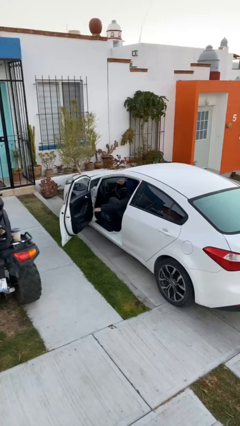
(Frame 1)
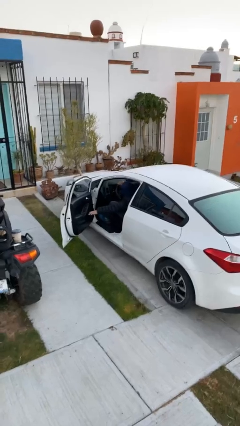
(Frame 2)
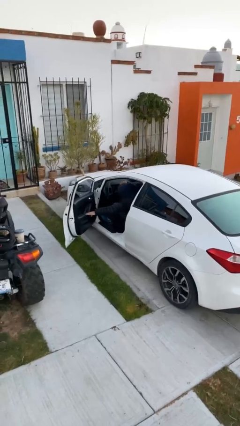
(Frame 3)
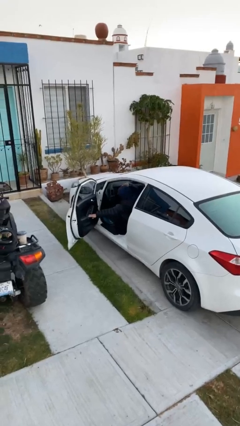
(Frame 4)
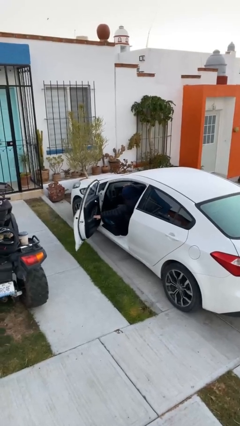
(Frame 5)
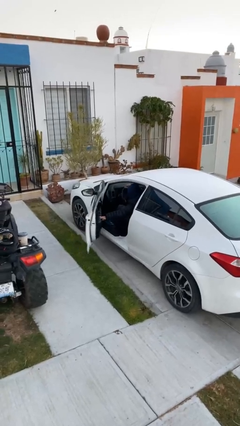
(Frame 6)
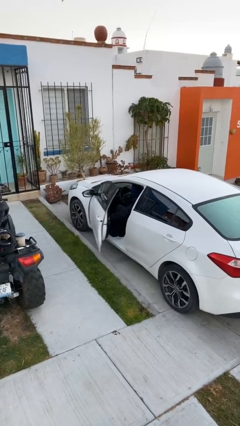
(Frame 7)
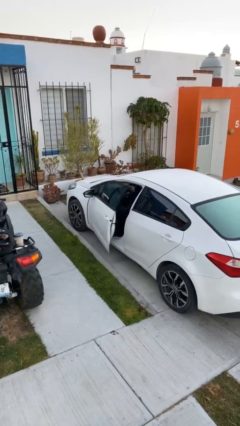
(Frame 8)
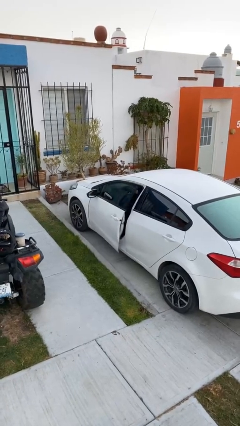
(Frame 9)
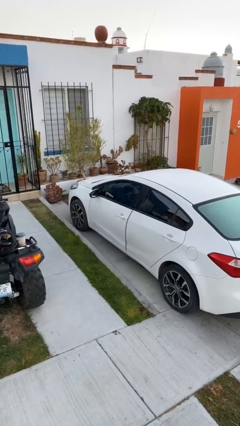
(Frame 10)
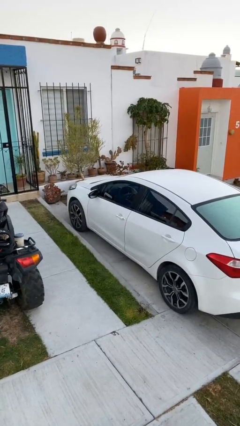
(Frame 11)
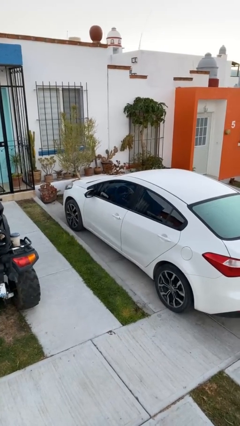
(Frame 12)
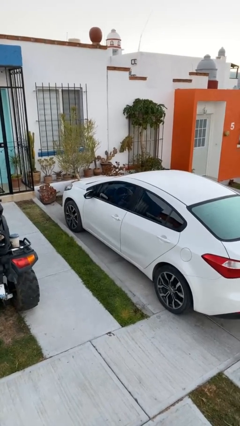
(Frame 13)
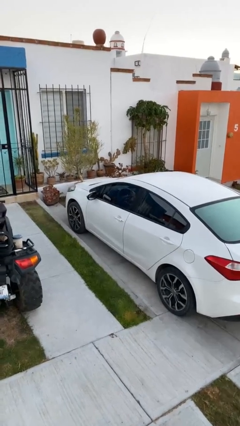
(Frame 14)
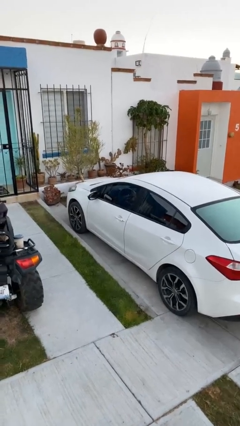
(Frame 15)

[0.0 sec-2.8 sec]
person closes car door

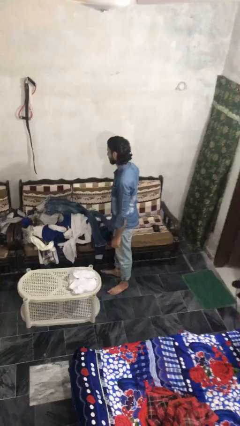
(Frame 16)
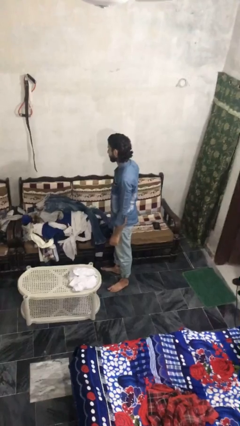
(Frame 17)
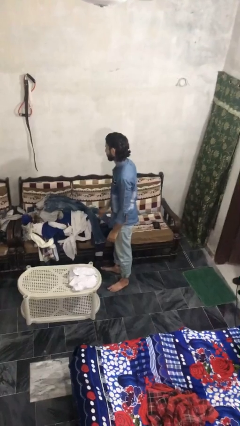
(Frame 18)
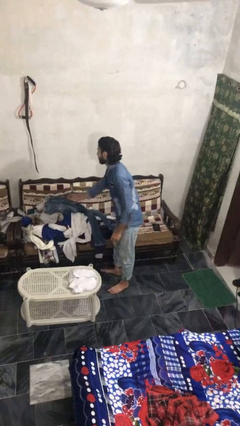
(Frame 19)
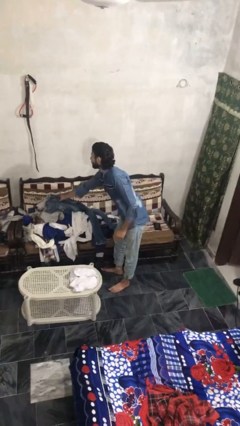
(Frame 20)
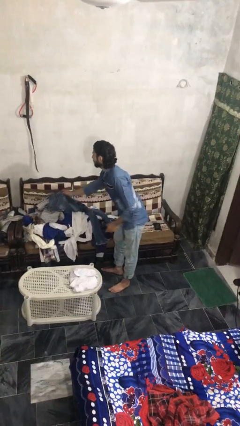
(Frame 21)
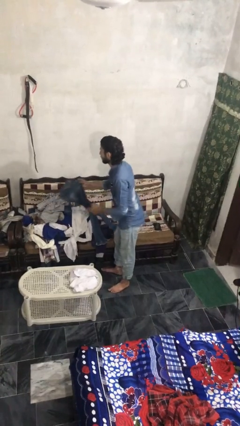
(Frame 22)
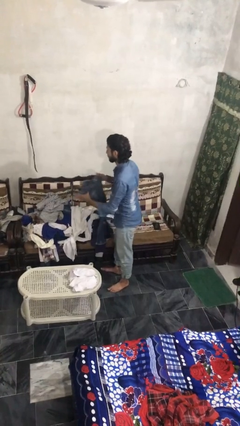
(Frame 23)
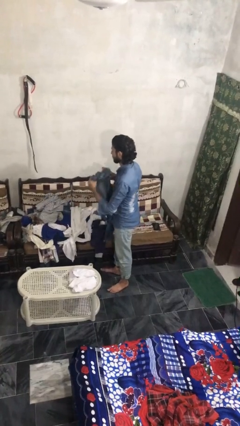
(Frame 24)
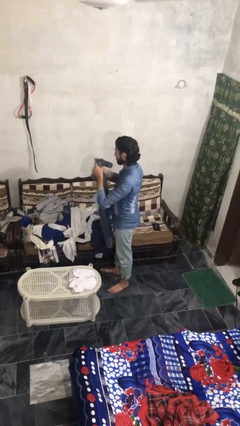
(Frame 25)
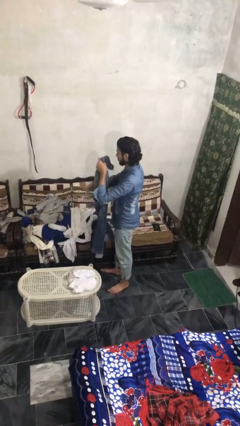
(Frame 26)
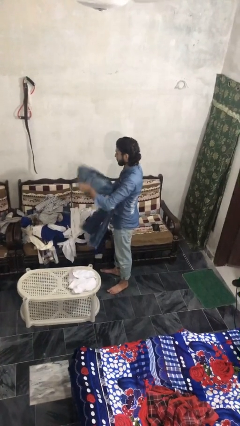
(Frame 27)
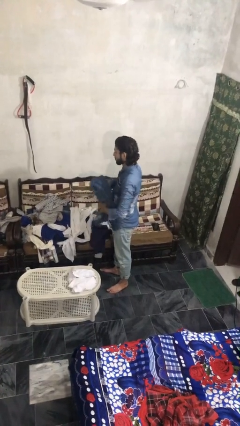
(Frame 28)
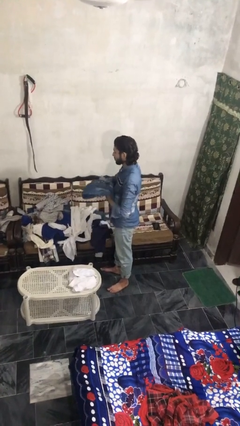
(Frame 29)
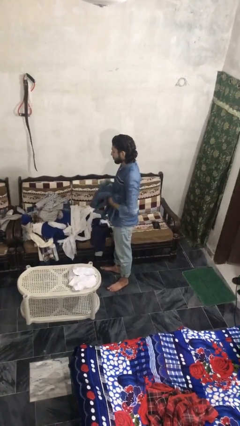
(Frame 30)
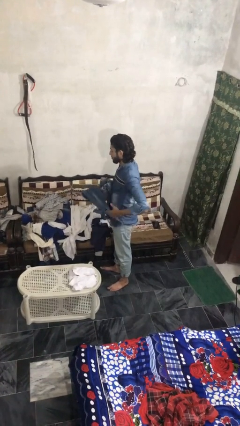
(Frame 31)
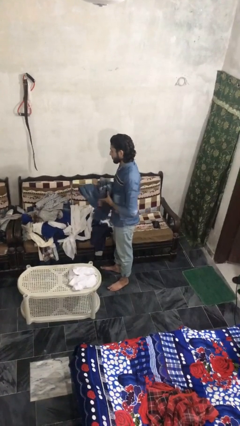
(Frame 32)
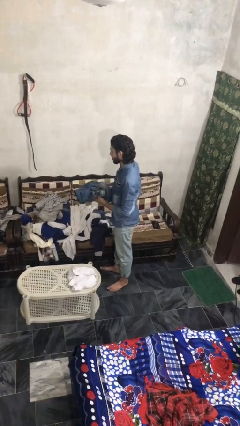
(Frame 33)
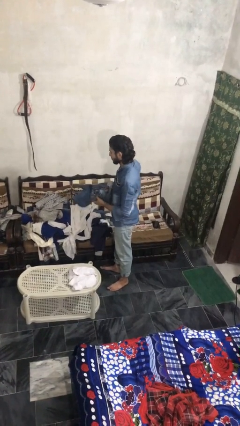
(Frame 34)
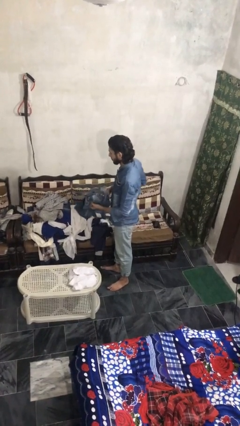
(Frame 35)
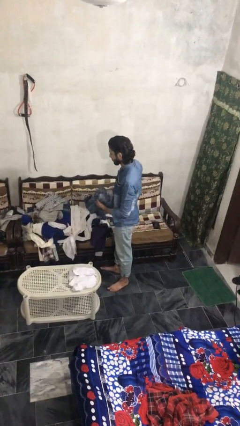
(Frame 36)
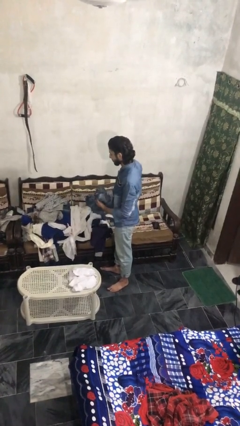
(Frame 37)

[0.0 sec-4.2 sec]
person folds pants

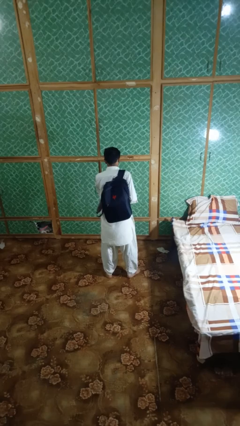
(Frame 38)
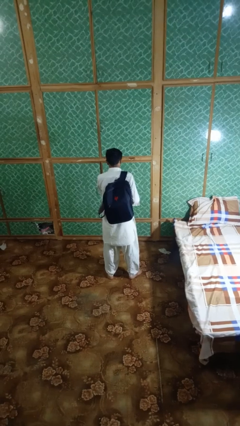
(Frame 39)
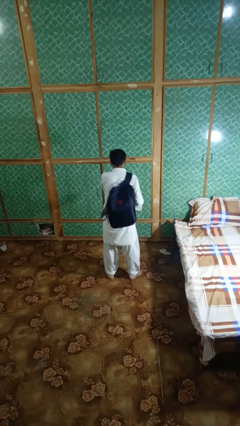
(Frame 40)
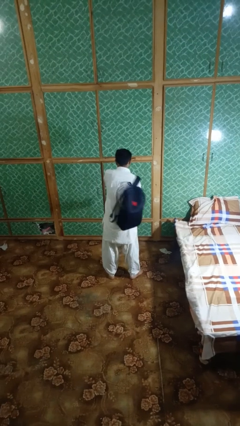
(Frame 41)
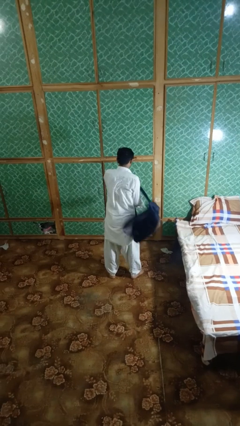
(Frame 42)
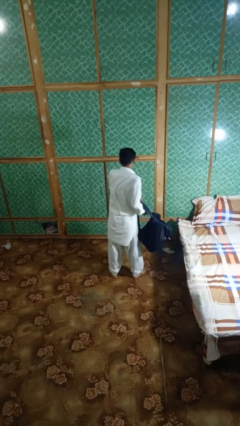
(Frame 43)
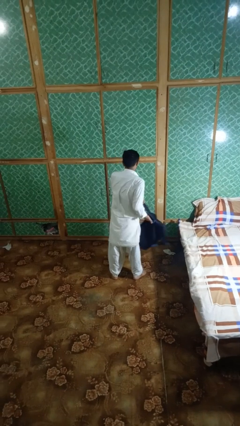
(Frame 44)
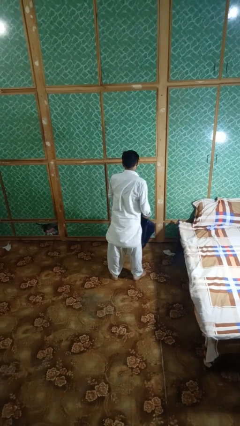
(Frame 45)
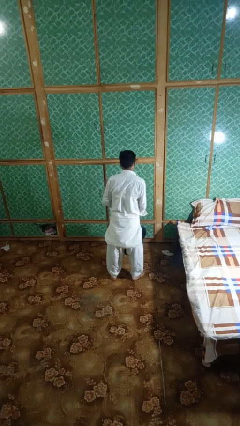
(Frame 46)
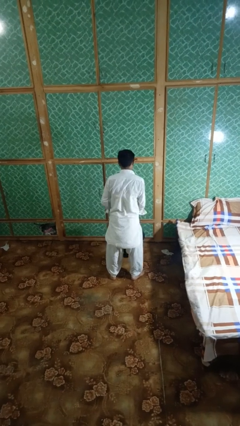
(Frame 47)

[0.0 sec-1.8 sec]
person takes off backpack

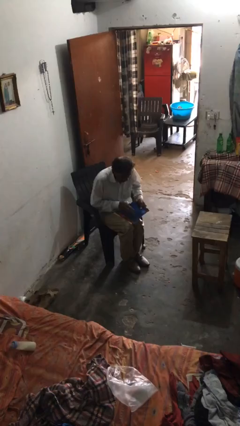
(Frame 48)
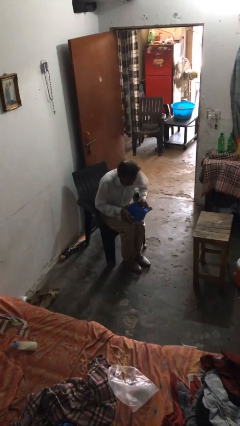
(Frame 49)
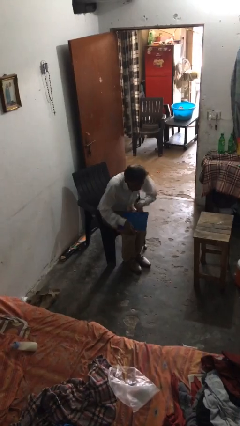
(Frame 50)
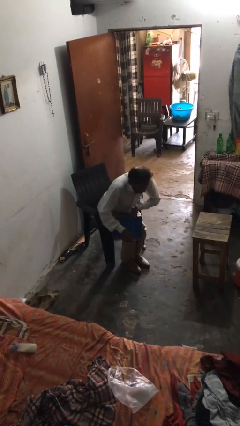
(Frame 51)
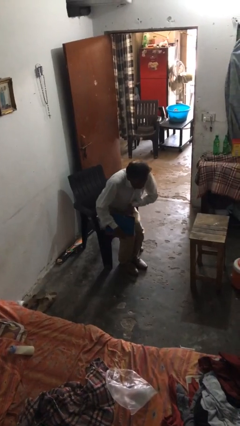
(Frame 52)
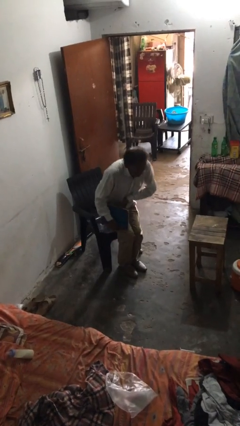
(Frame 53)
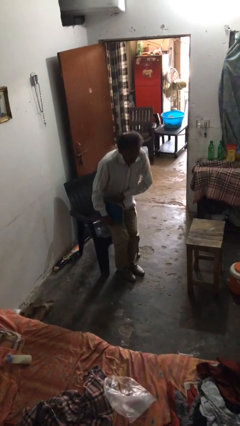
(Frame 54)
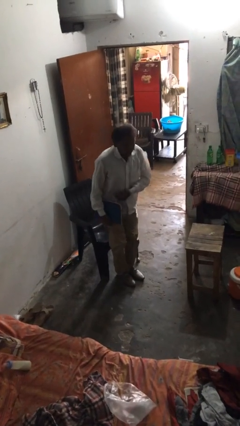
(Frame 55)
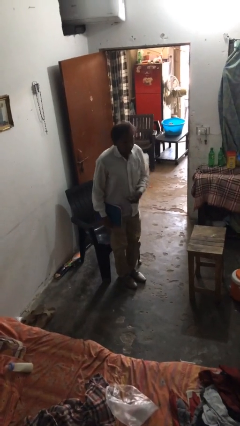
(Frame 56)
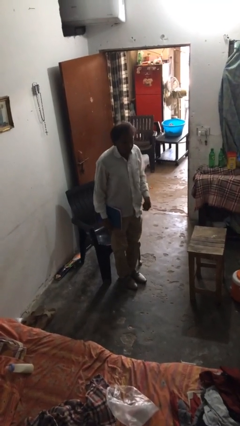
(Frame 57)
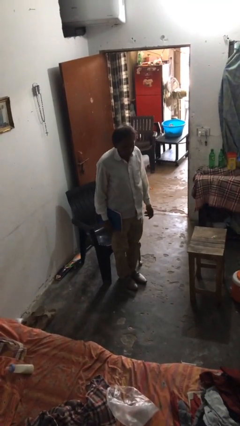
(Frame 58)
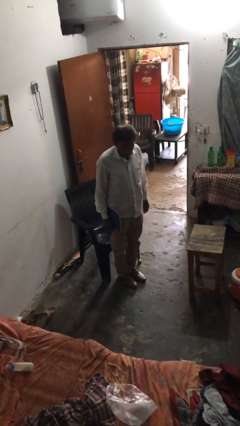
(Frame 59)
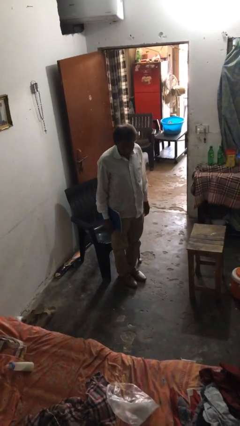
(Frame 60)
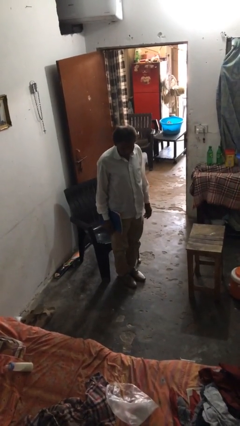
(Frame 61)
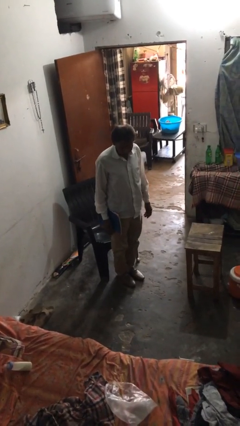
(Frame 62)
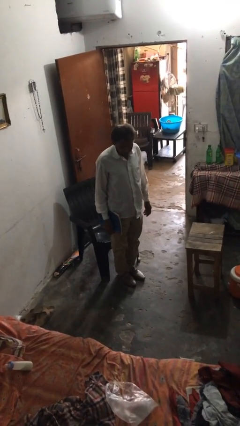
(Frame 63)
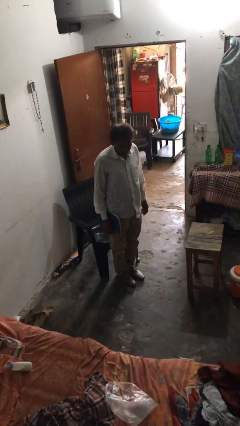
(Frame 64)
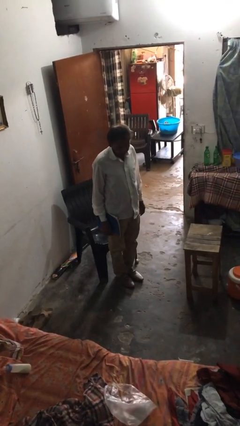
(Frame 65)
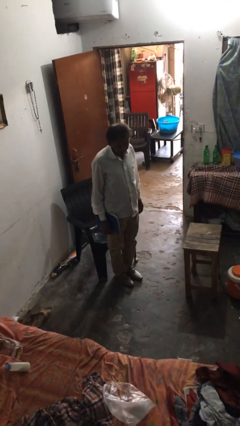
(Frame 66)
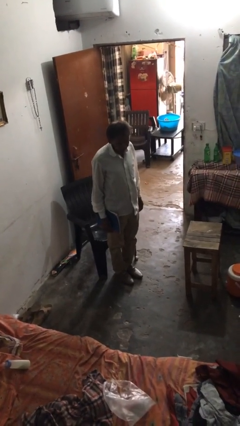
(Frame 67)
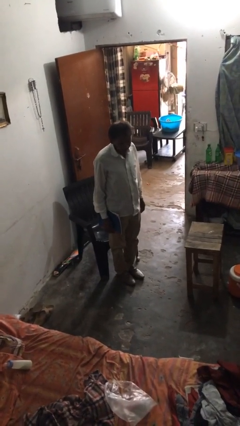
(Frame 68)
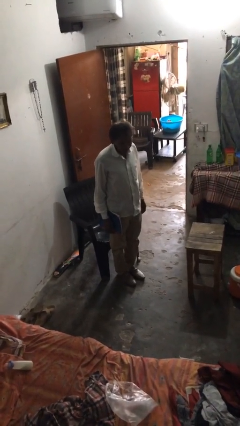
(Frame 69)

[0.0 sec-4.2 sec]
person stands up

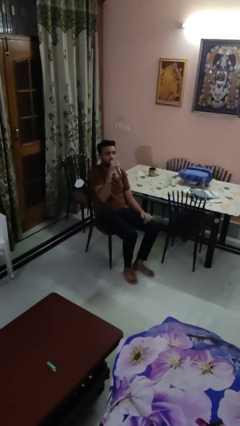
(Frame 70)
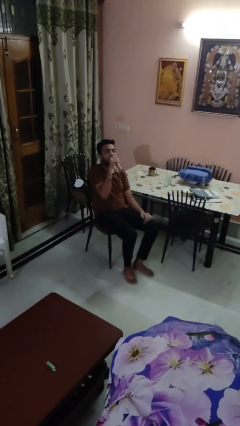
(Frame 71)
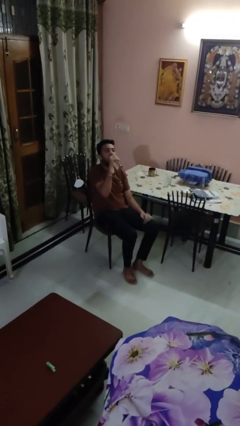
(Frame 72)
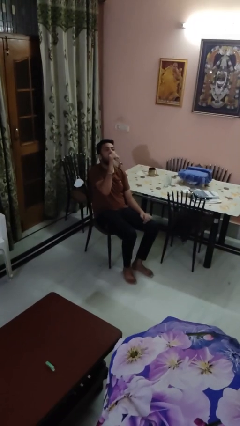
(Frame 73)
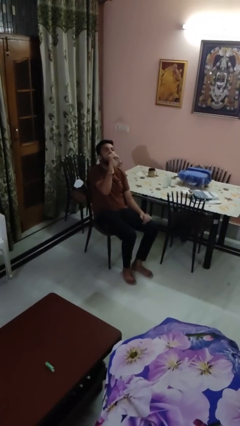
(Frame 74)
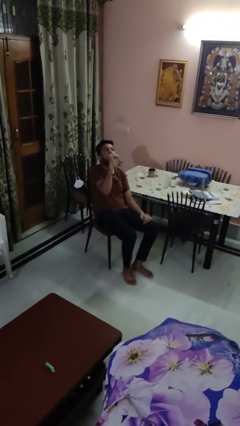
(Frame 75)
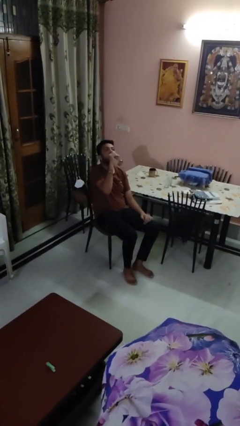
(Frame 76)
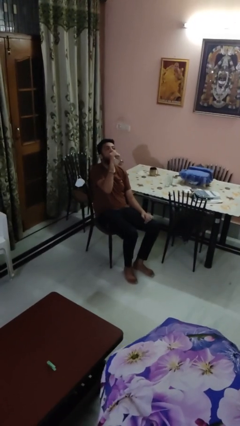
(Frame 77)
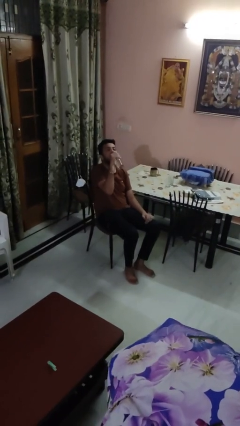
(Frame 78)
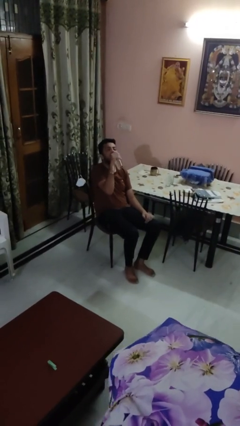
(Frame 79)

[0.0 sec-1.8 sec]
person drinks from bottle

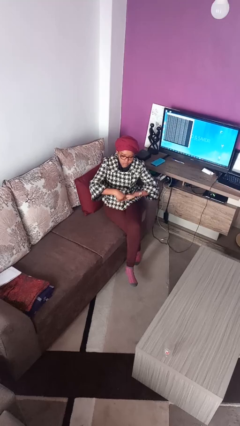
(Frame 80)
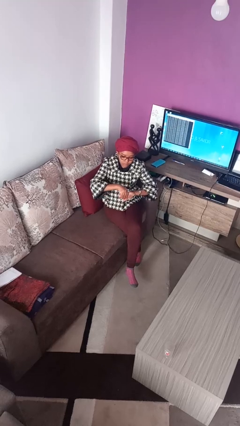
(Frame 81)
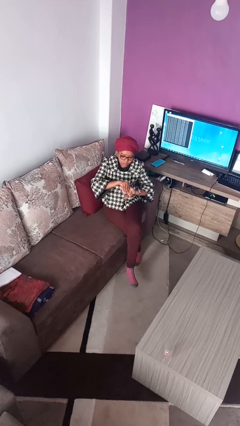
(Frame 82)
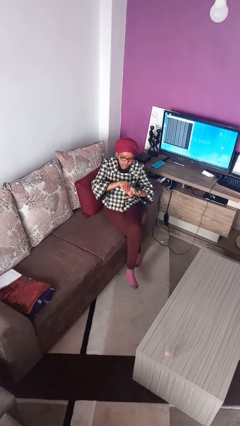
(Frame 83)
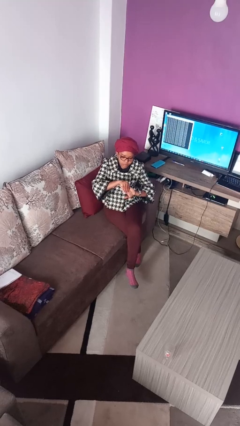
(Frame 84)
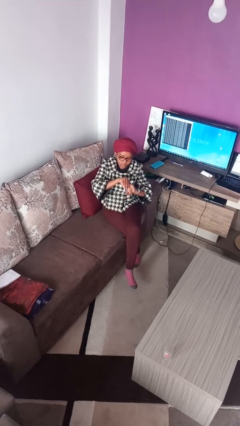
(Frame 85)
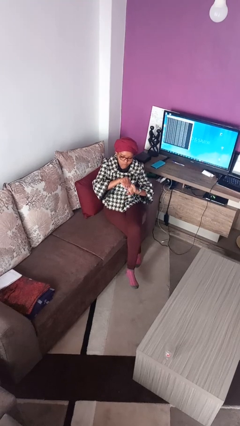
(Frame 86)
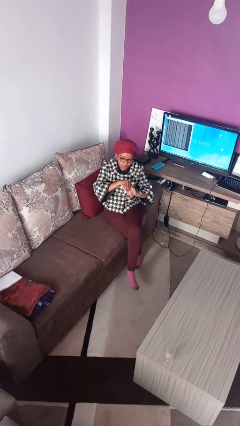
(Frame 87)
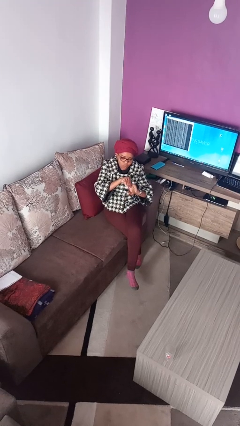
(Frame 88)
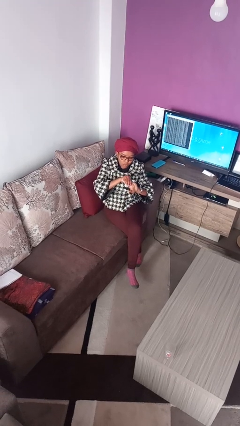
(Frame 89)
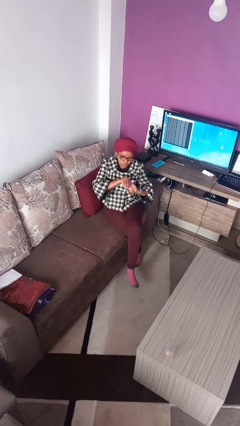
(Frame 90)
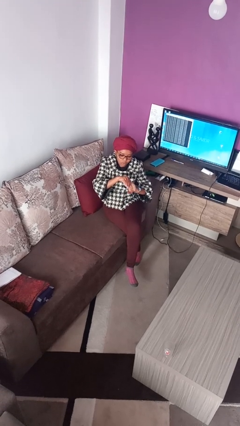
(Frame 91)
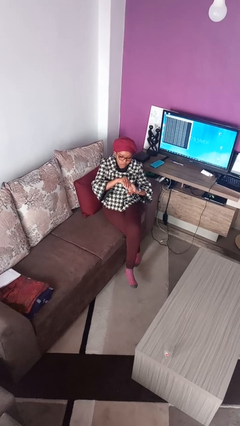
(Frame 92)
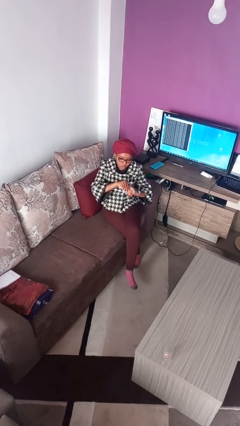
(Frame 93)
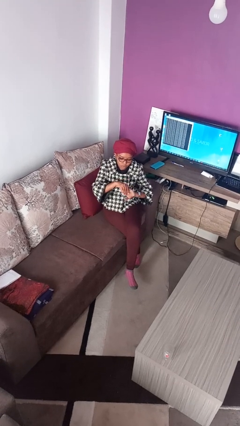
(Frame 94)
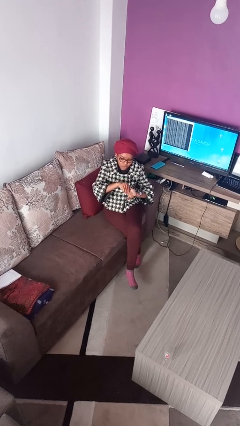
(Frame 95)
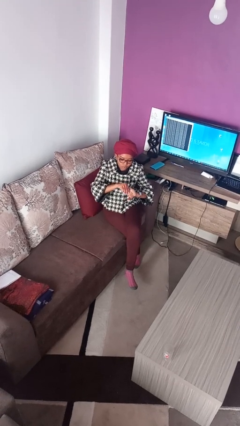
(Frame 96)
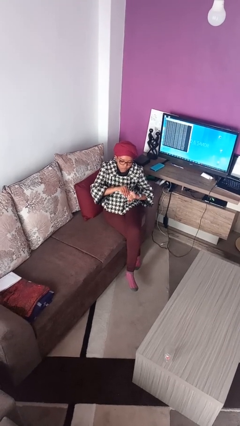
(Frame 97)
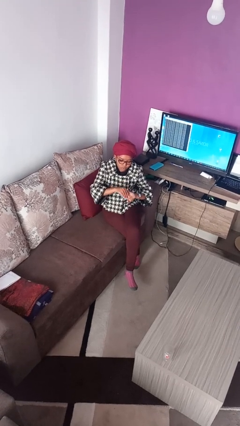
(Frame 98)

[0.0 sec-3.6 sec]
person cracks knuckles
